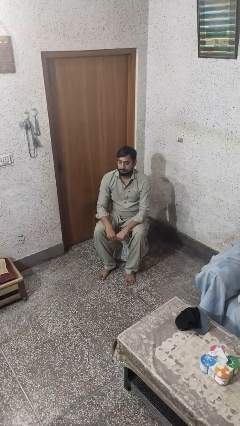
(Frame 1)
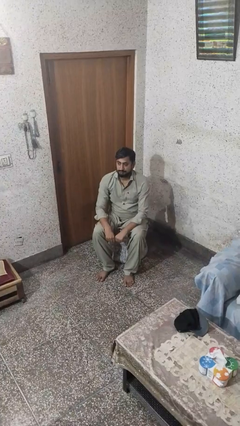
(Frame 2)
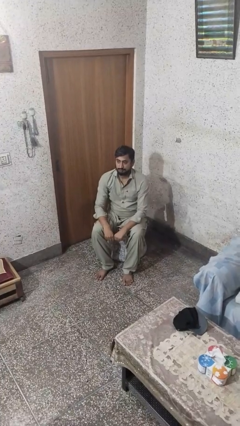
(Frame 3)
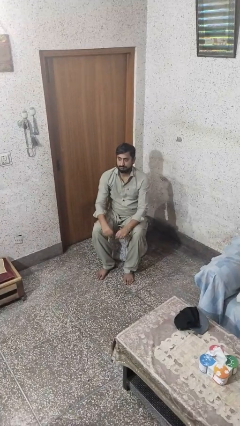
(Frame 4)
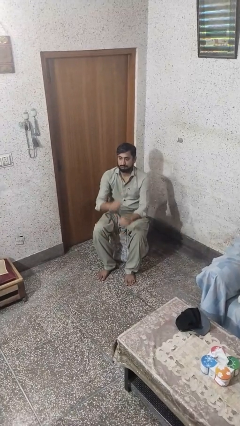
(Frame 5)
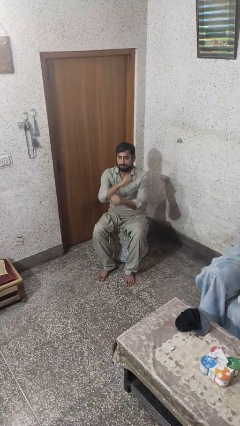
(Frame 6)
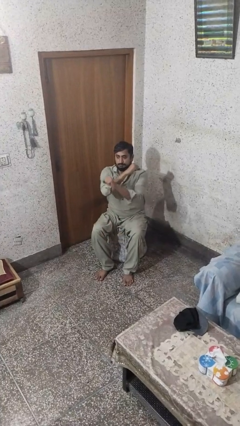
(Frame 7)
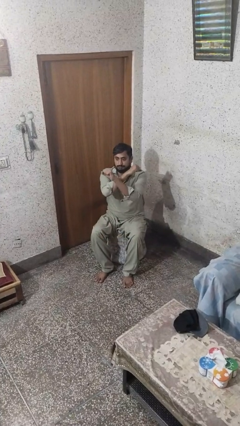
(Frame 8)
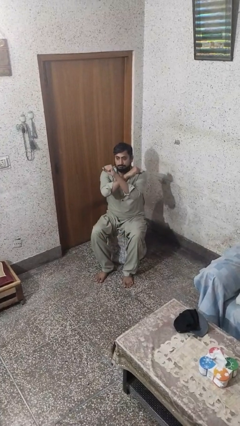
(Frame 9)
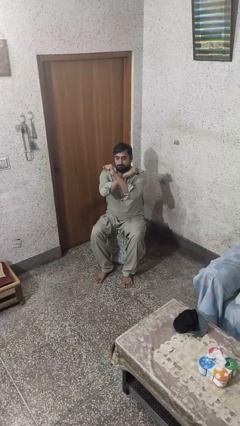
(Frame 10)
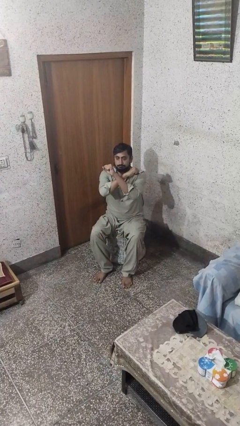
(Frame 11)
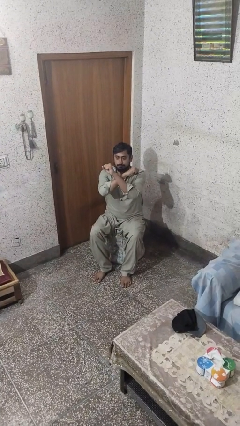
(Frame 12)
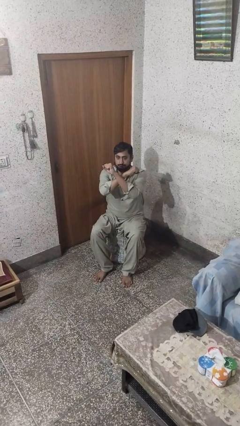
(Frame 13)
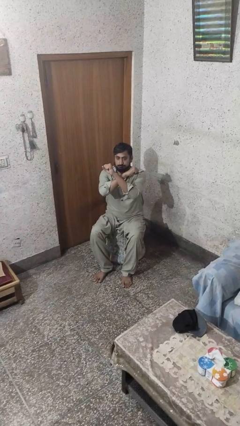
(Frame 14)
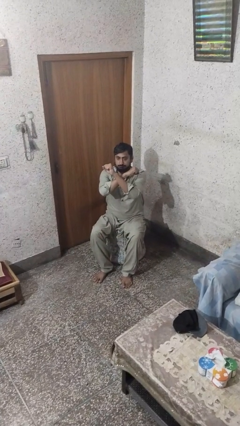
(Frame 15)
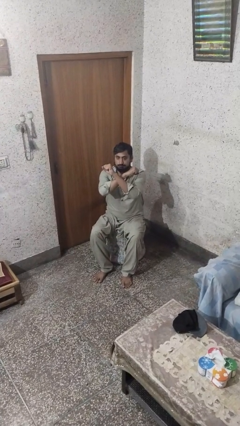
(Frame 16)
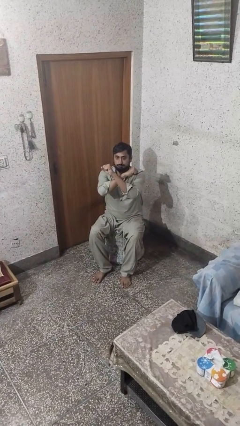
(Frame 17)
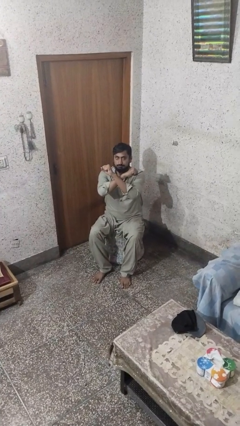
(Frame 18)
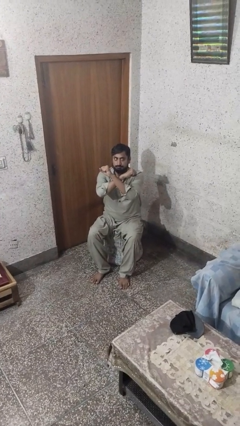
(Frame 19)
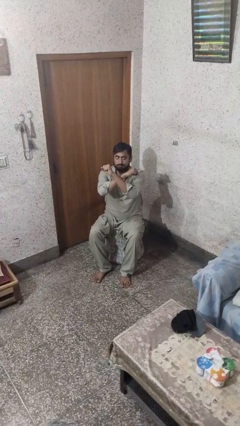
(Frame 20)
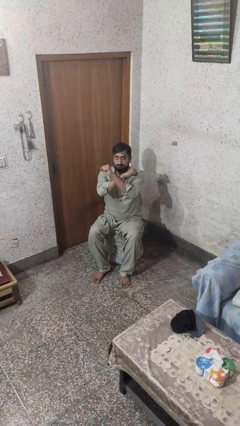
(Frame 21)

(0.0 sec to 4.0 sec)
person gestures arms x

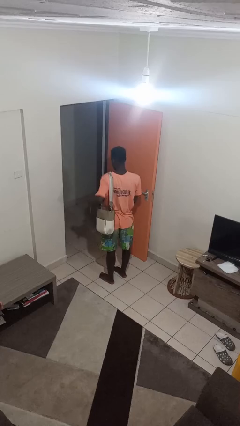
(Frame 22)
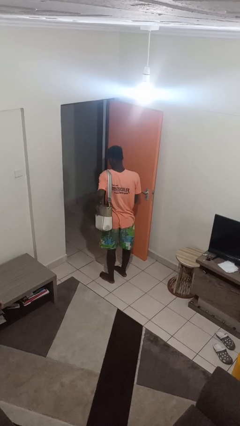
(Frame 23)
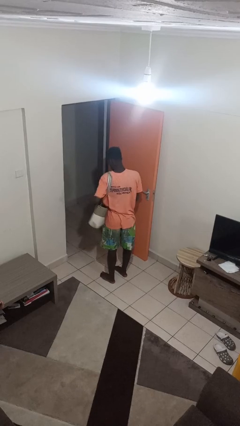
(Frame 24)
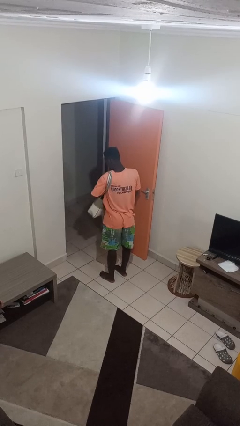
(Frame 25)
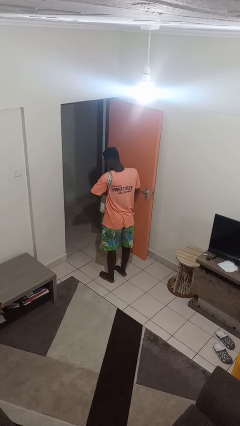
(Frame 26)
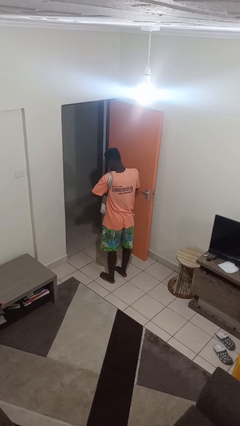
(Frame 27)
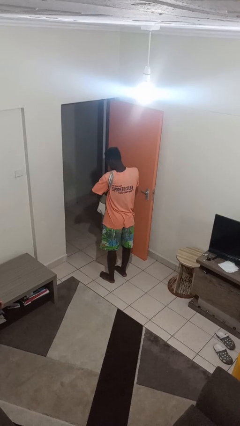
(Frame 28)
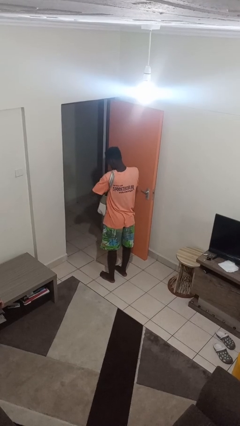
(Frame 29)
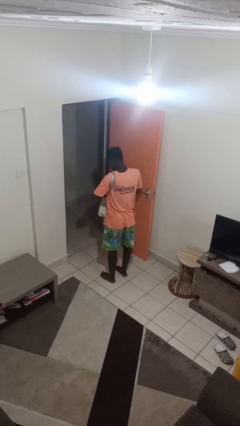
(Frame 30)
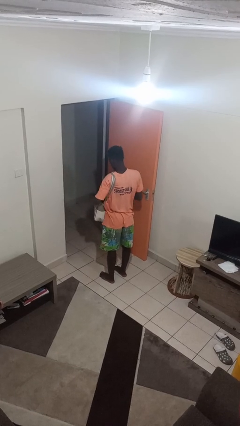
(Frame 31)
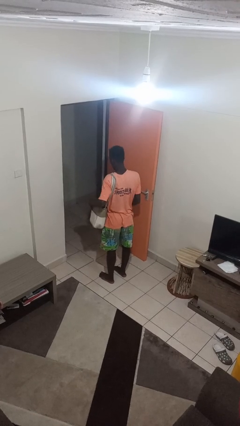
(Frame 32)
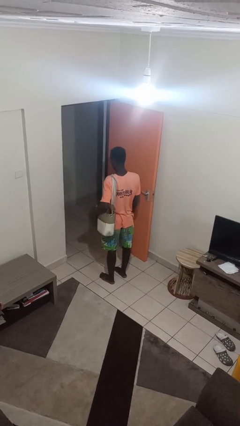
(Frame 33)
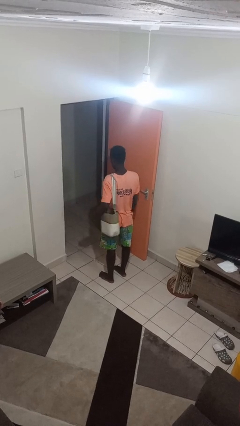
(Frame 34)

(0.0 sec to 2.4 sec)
person puts object into purse

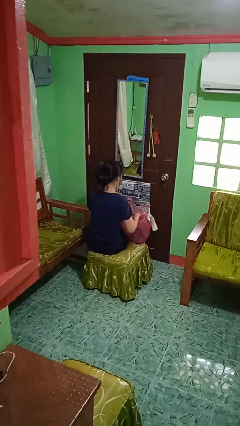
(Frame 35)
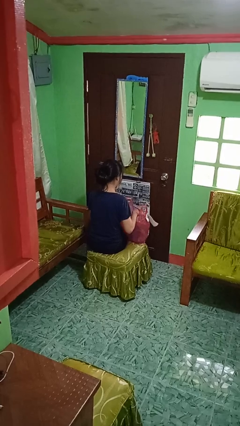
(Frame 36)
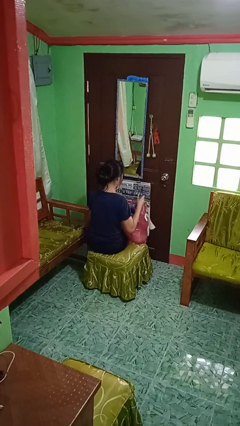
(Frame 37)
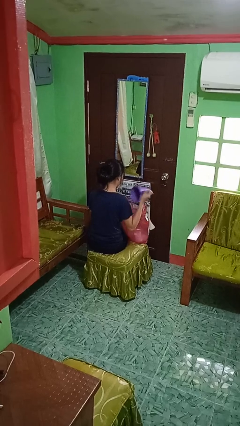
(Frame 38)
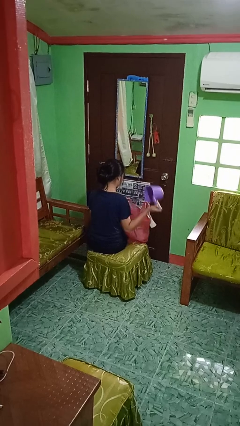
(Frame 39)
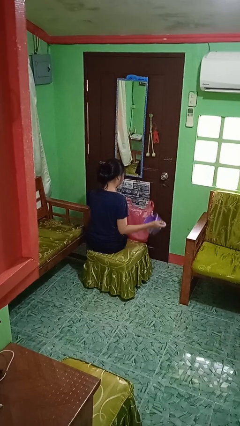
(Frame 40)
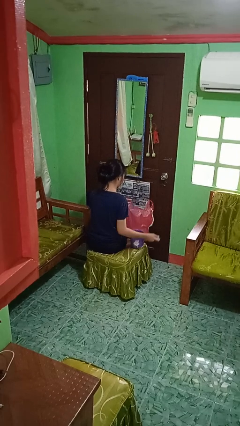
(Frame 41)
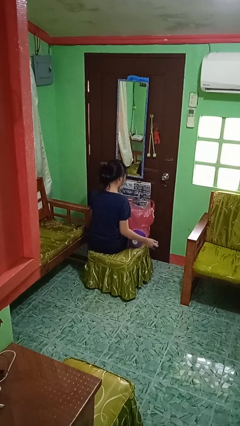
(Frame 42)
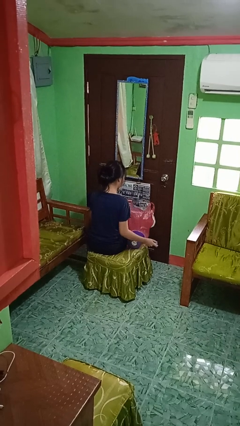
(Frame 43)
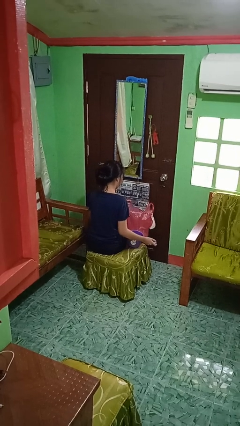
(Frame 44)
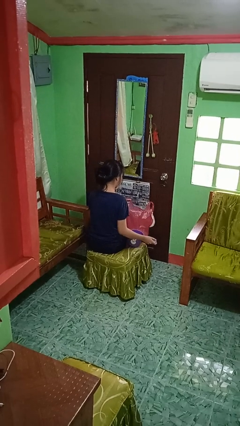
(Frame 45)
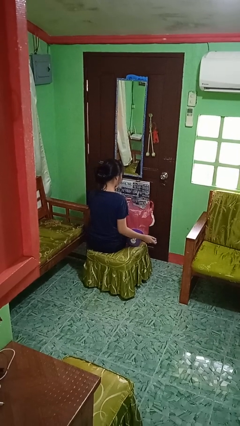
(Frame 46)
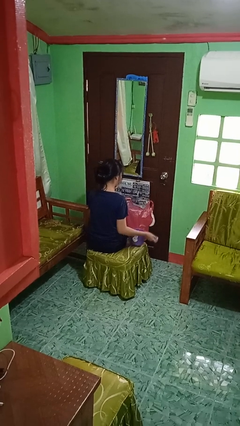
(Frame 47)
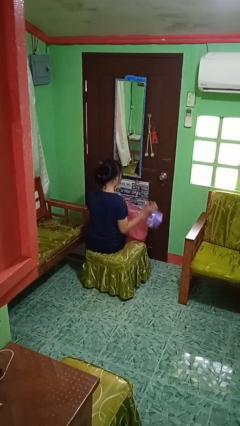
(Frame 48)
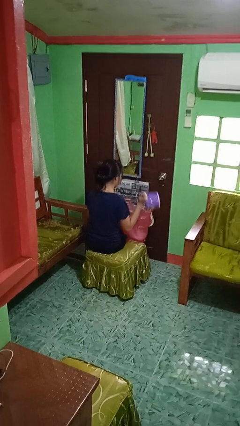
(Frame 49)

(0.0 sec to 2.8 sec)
person takes object from bag

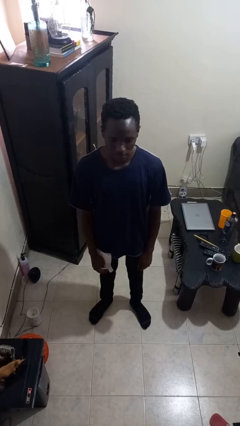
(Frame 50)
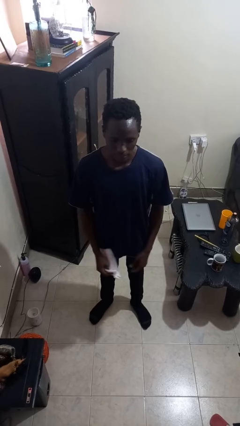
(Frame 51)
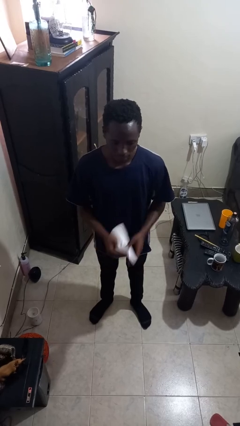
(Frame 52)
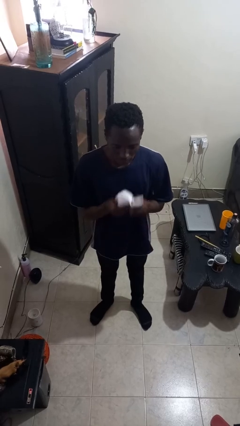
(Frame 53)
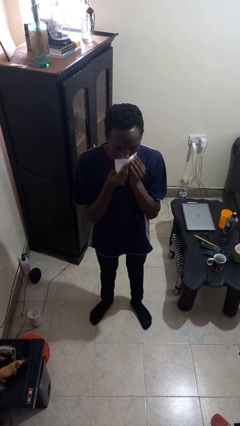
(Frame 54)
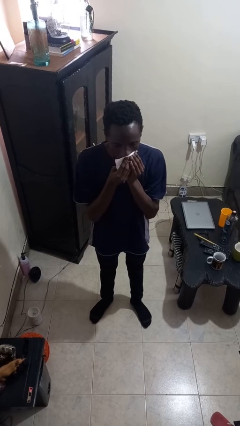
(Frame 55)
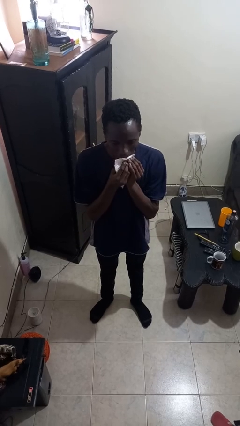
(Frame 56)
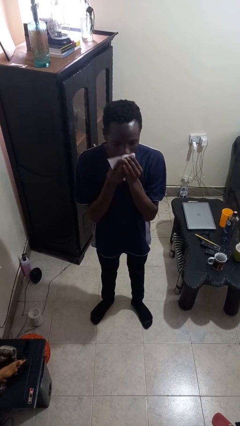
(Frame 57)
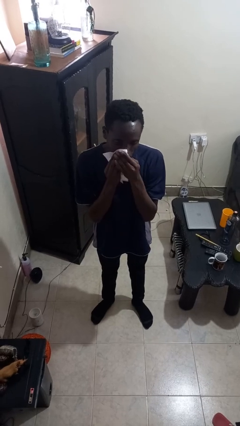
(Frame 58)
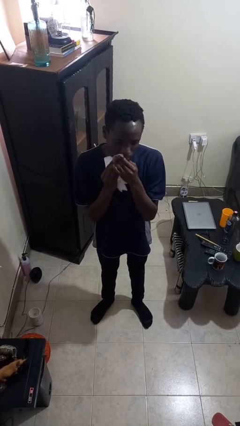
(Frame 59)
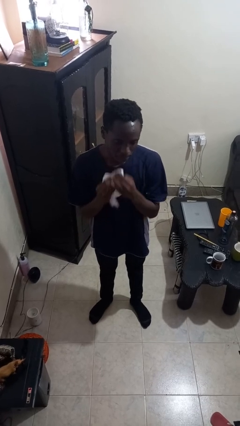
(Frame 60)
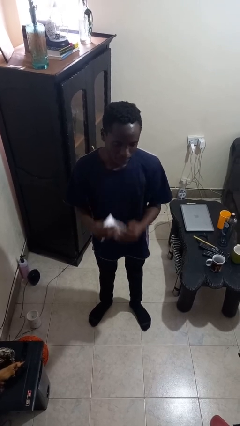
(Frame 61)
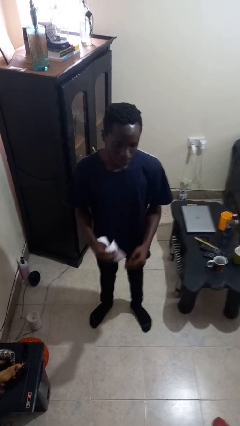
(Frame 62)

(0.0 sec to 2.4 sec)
person wipes mouth with napkin

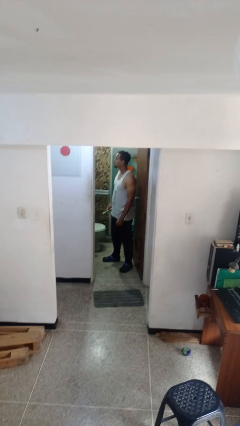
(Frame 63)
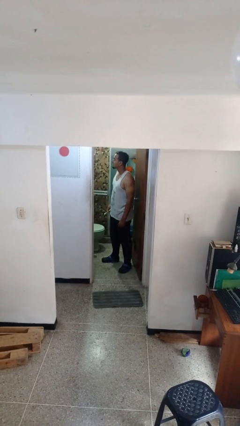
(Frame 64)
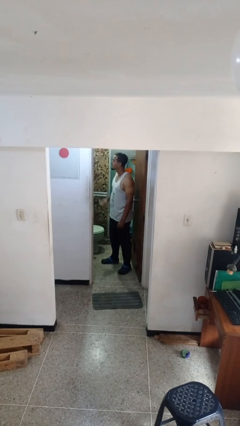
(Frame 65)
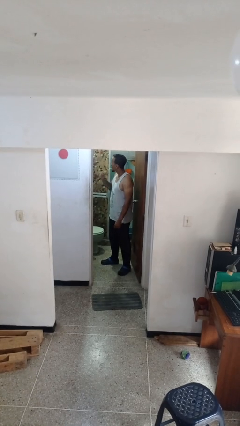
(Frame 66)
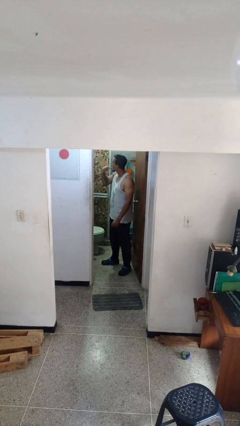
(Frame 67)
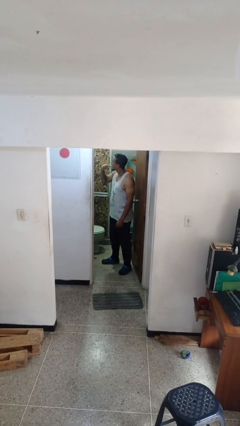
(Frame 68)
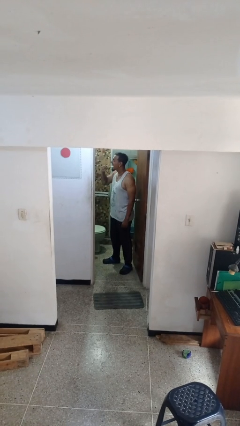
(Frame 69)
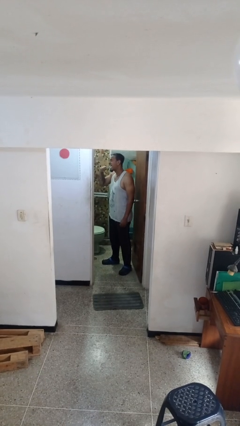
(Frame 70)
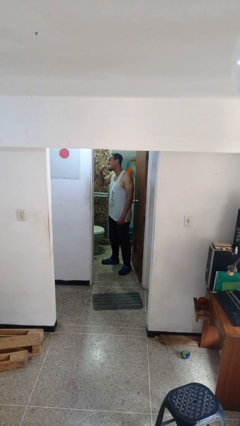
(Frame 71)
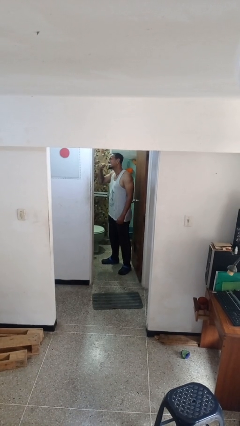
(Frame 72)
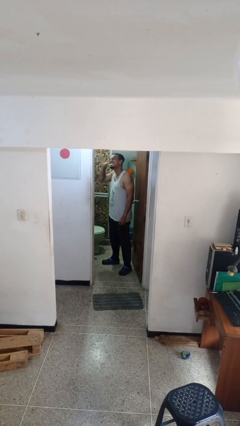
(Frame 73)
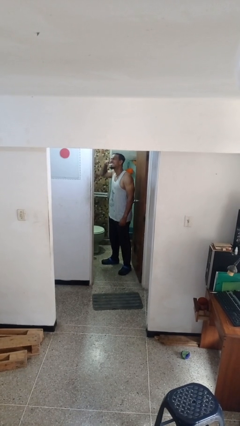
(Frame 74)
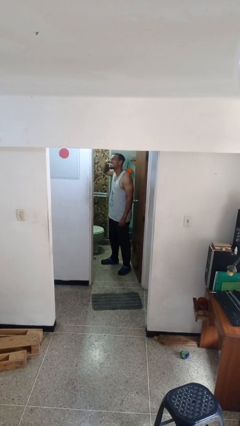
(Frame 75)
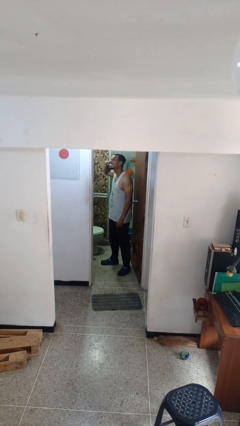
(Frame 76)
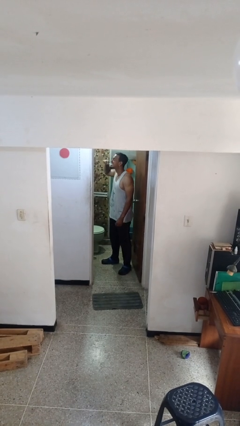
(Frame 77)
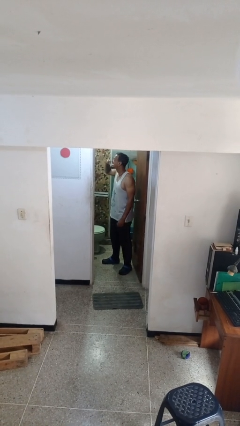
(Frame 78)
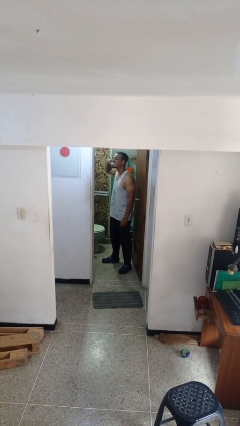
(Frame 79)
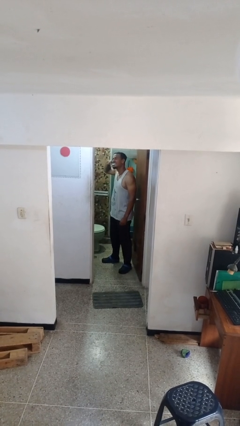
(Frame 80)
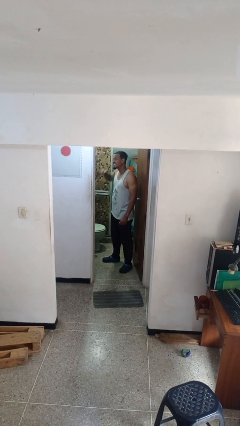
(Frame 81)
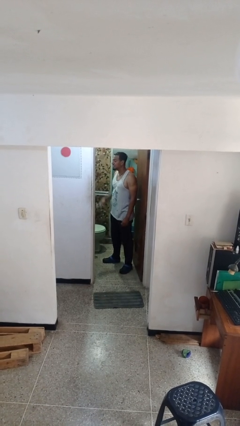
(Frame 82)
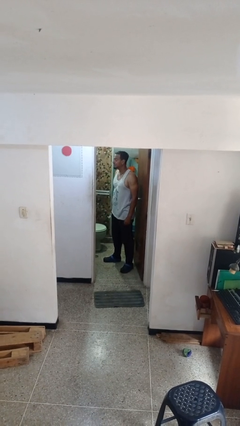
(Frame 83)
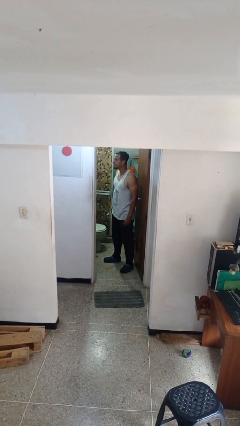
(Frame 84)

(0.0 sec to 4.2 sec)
person brushes teeth

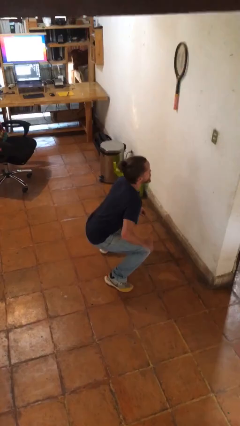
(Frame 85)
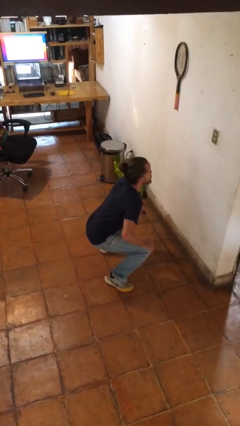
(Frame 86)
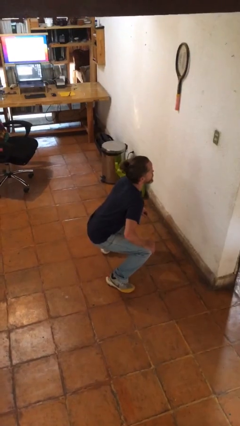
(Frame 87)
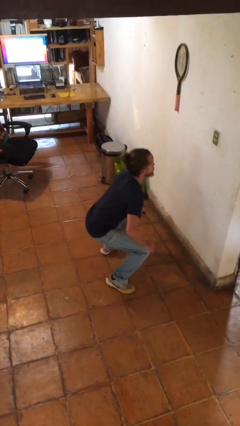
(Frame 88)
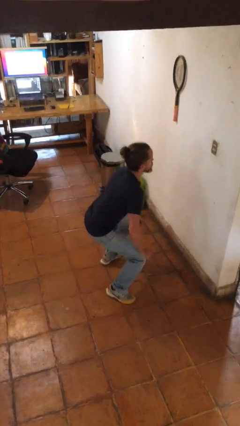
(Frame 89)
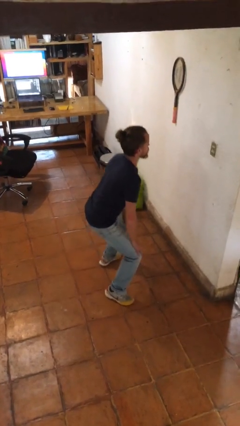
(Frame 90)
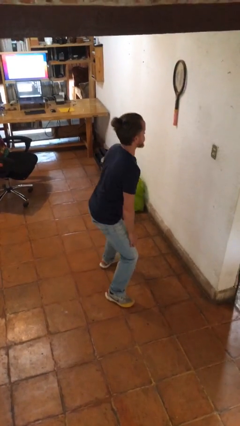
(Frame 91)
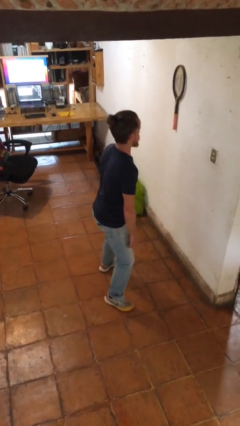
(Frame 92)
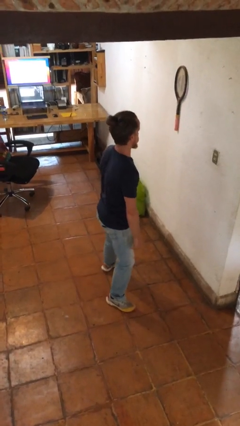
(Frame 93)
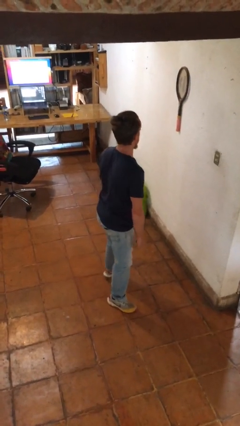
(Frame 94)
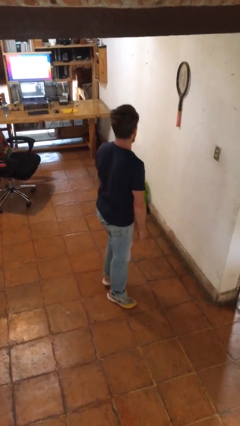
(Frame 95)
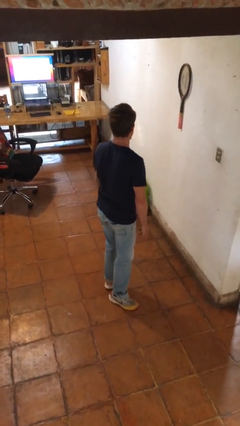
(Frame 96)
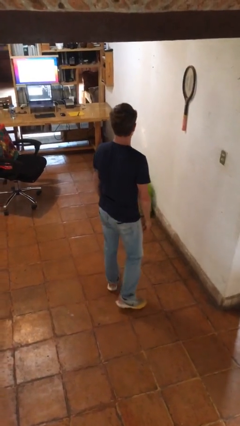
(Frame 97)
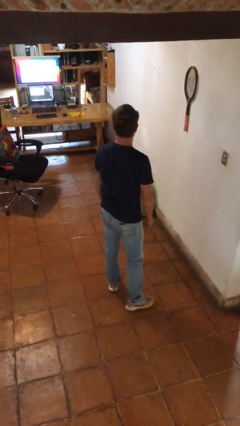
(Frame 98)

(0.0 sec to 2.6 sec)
person stands up
